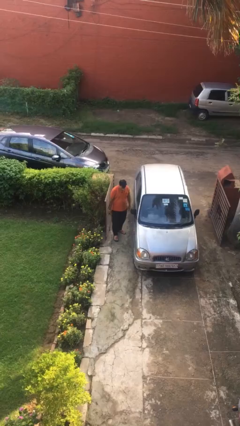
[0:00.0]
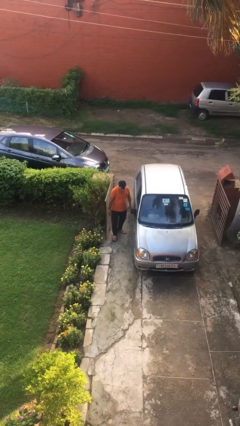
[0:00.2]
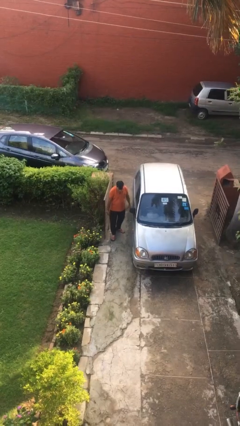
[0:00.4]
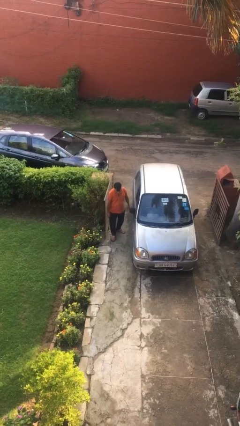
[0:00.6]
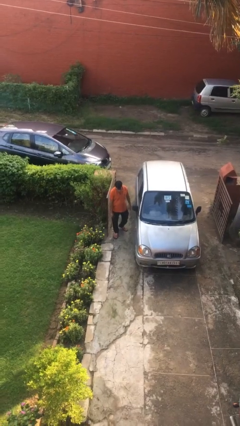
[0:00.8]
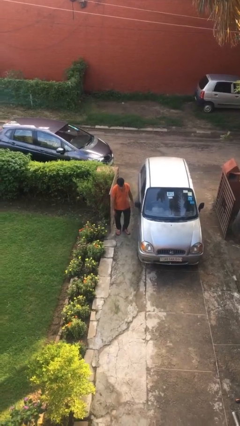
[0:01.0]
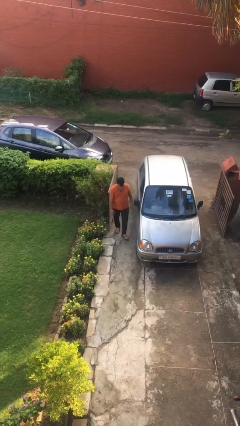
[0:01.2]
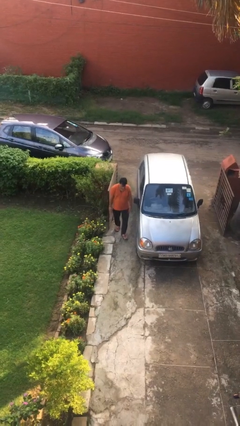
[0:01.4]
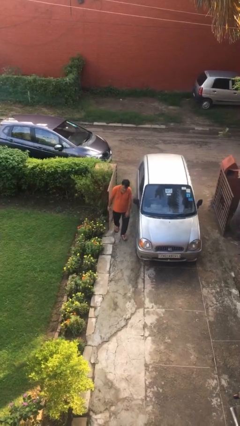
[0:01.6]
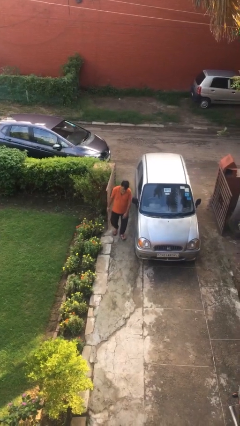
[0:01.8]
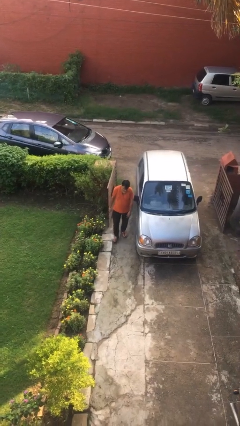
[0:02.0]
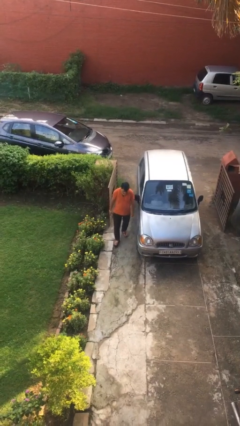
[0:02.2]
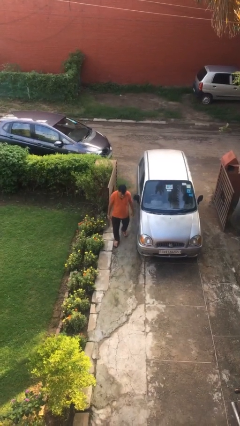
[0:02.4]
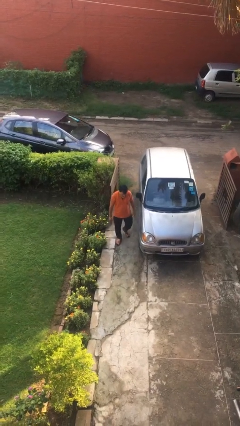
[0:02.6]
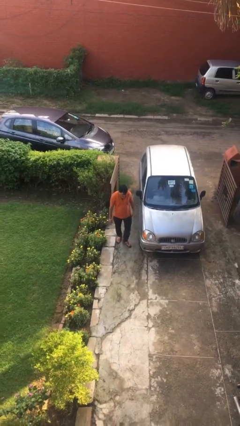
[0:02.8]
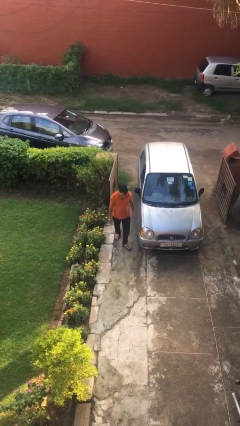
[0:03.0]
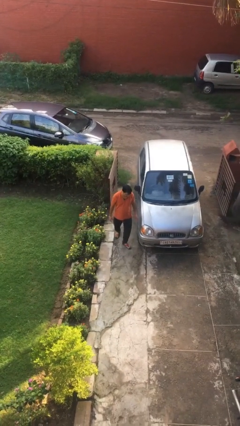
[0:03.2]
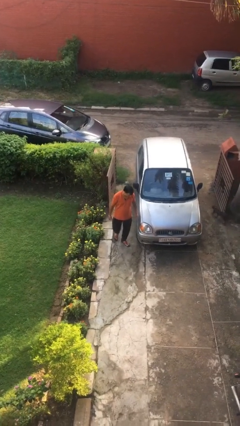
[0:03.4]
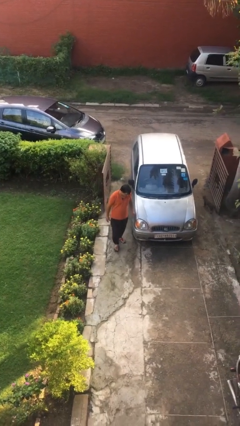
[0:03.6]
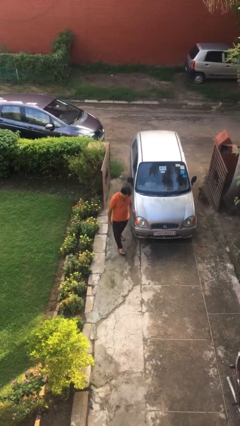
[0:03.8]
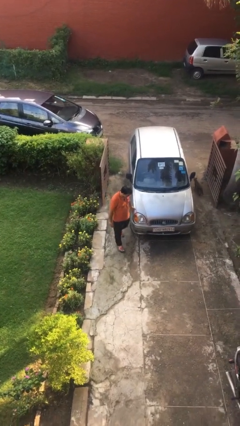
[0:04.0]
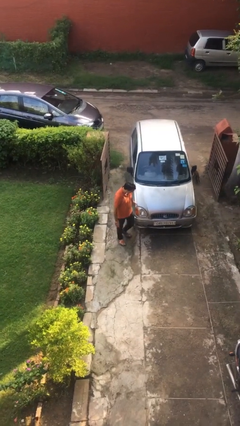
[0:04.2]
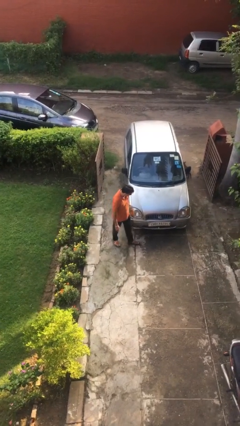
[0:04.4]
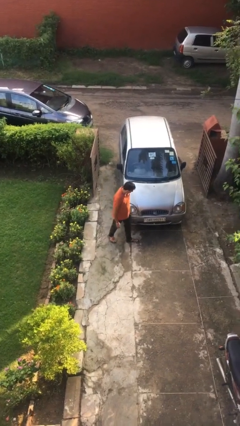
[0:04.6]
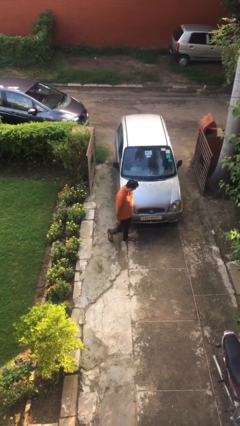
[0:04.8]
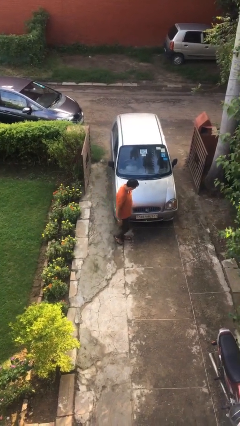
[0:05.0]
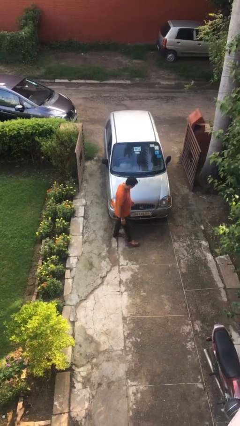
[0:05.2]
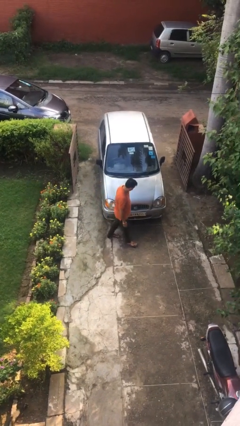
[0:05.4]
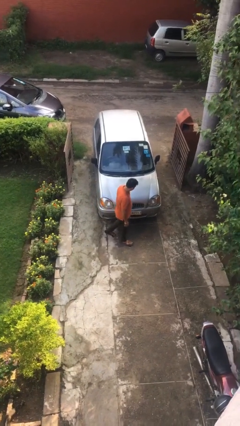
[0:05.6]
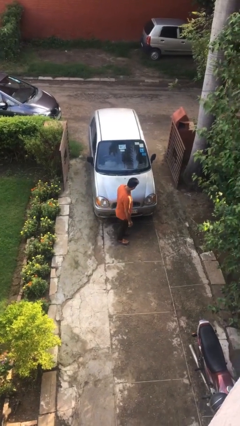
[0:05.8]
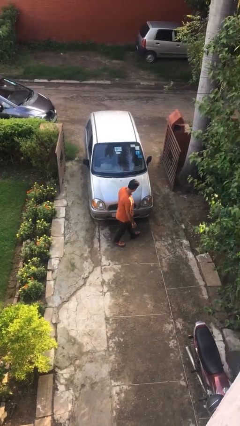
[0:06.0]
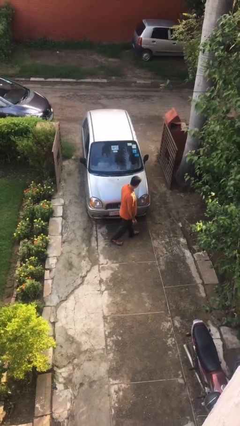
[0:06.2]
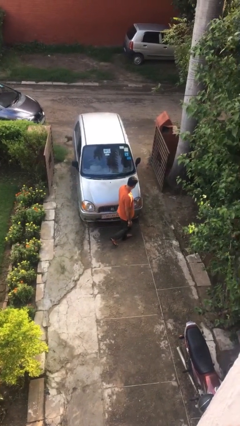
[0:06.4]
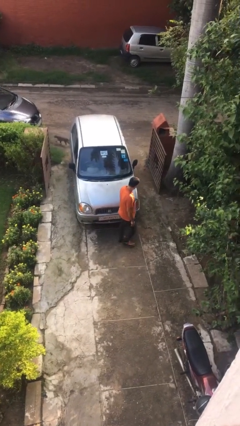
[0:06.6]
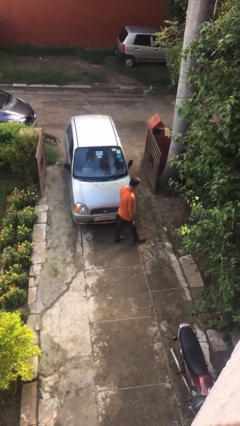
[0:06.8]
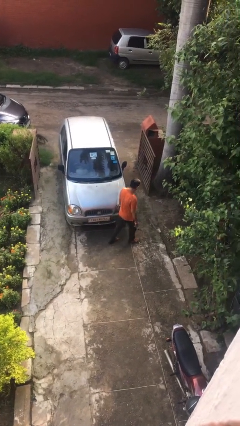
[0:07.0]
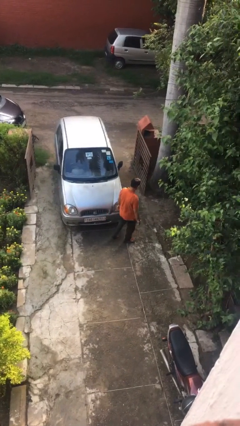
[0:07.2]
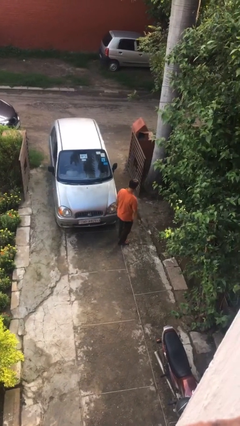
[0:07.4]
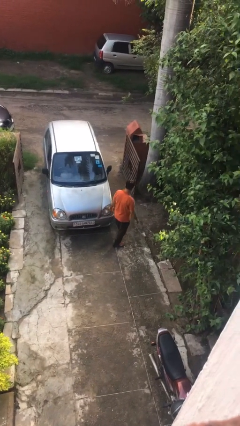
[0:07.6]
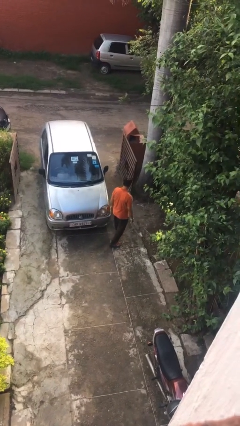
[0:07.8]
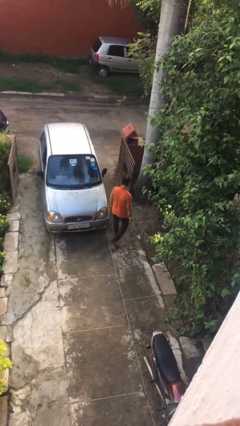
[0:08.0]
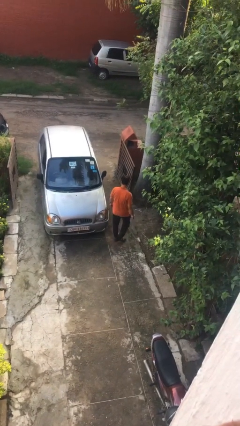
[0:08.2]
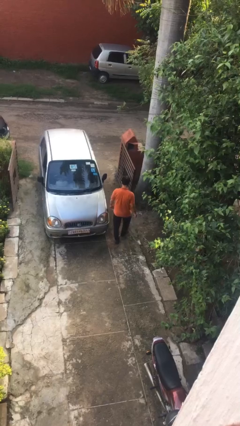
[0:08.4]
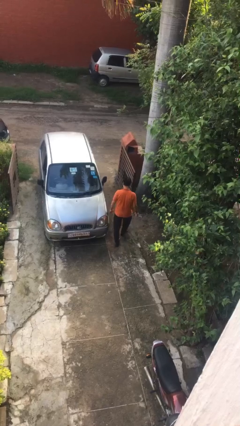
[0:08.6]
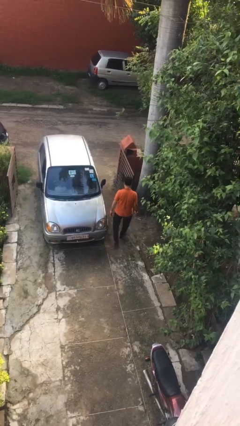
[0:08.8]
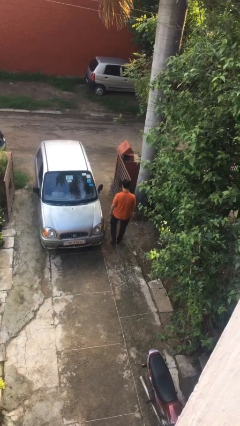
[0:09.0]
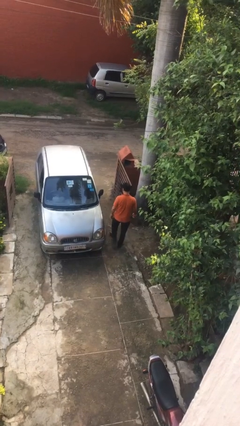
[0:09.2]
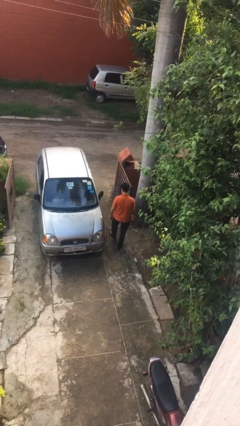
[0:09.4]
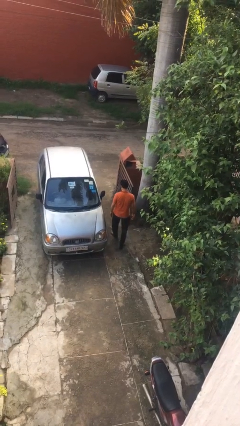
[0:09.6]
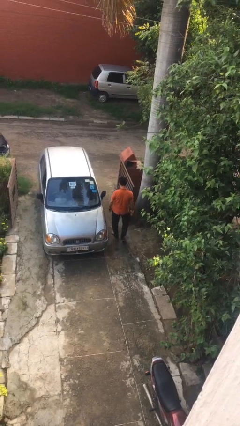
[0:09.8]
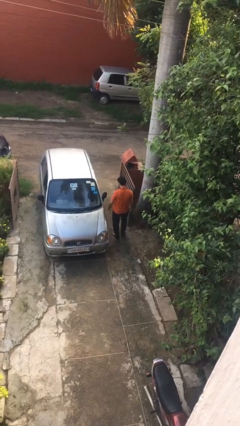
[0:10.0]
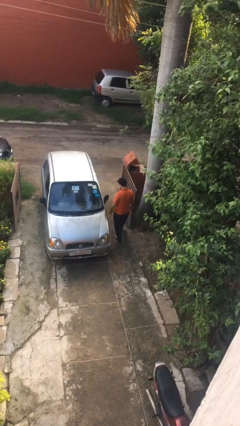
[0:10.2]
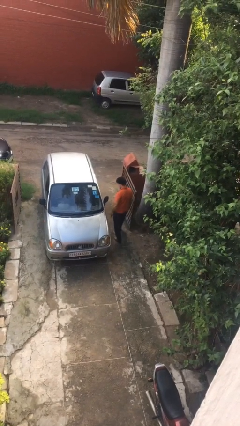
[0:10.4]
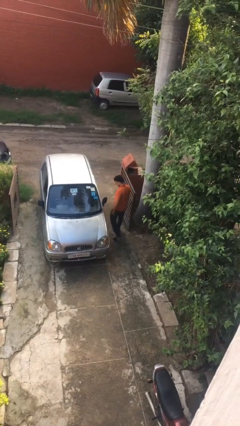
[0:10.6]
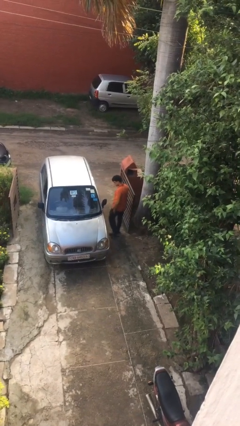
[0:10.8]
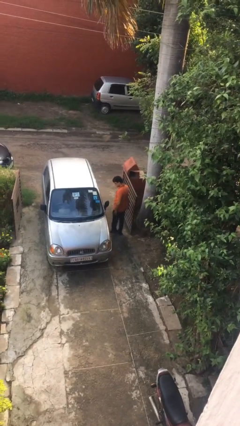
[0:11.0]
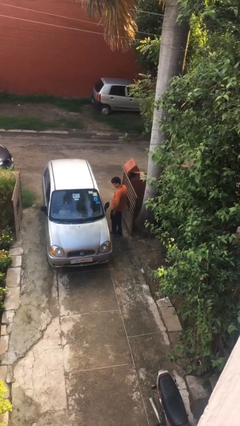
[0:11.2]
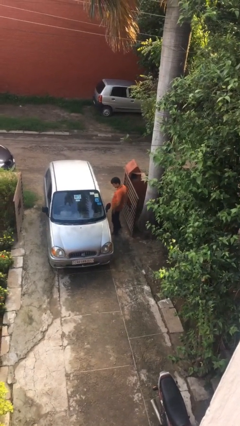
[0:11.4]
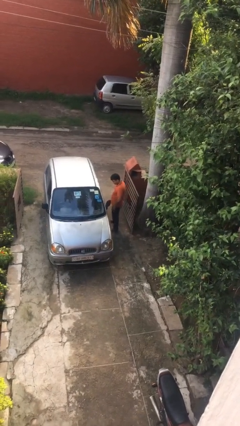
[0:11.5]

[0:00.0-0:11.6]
person walks around car

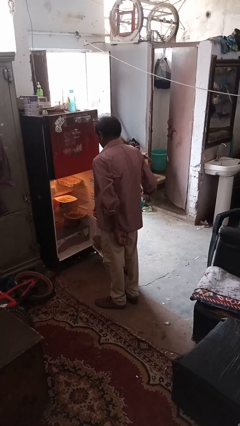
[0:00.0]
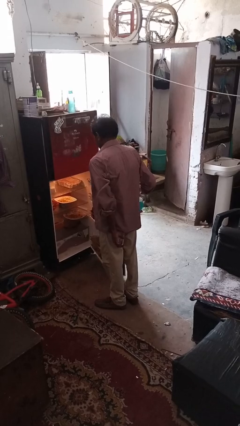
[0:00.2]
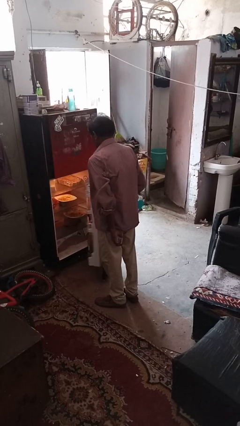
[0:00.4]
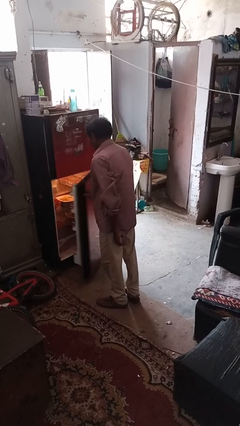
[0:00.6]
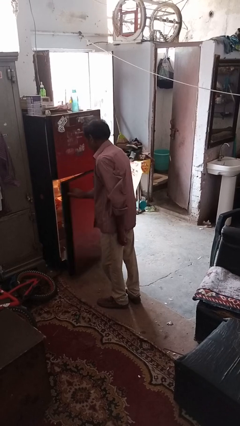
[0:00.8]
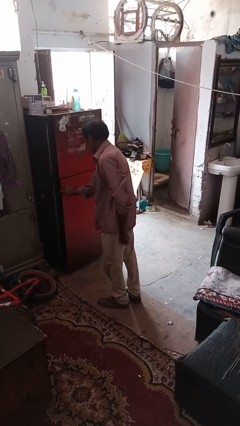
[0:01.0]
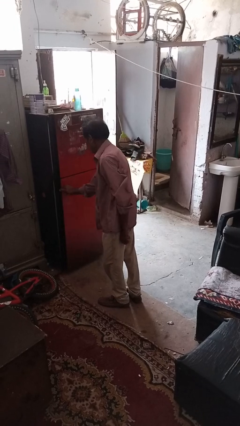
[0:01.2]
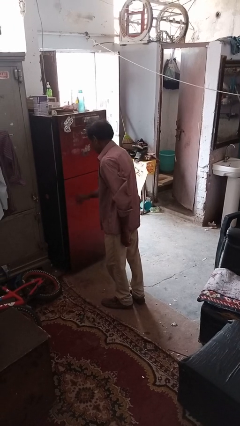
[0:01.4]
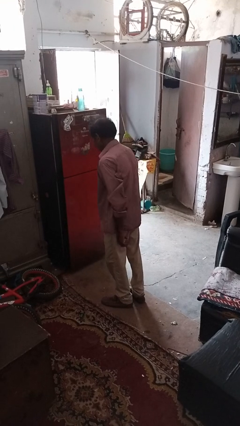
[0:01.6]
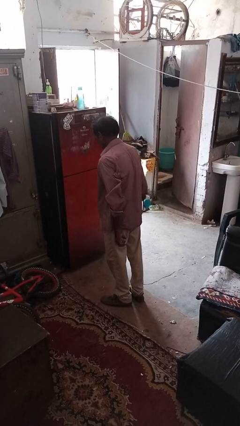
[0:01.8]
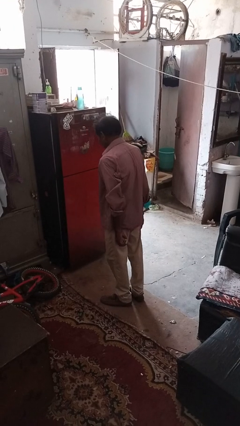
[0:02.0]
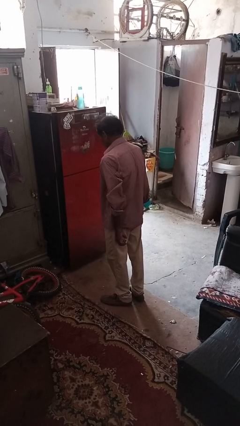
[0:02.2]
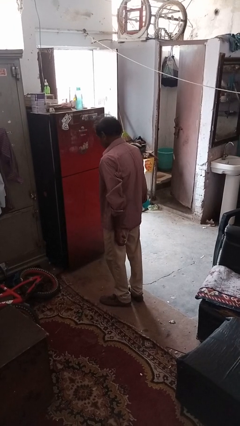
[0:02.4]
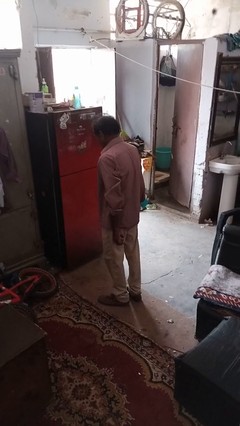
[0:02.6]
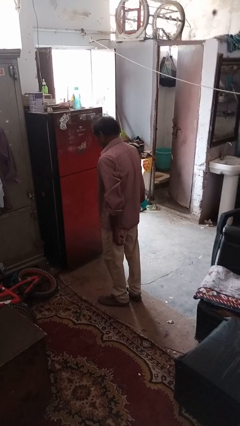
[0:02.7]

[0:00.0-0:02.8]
person closes refrigerator

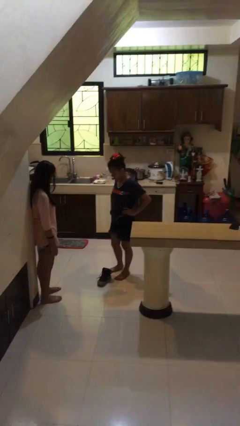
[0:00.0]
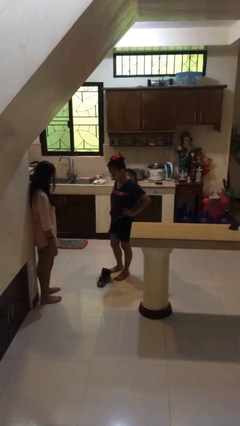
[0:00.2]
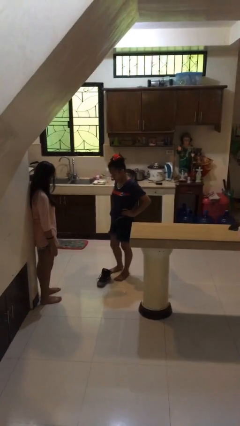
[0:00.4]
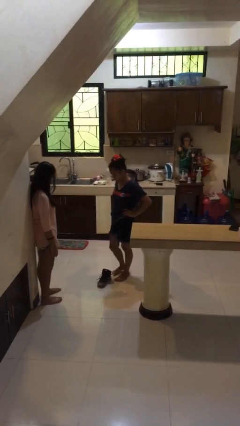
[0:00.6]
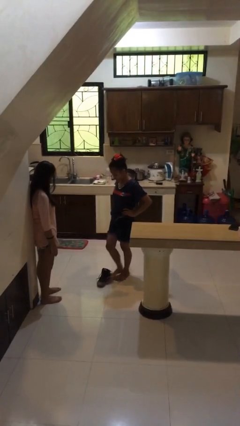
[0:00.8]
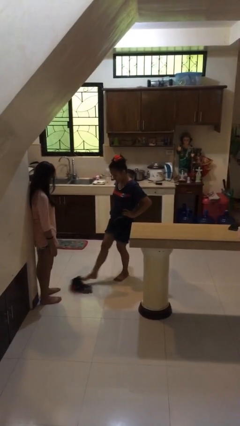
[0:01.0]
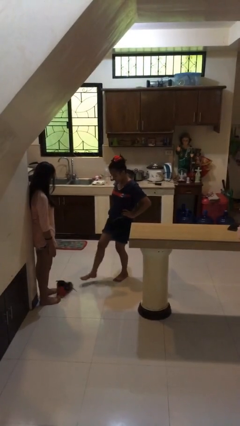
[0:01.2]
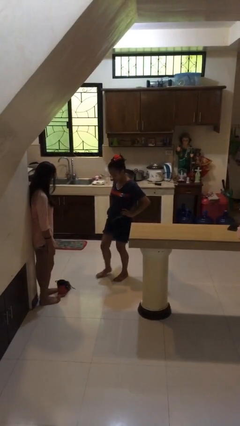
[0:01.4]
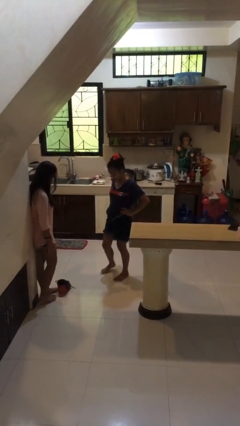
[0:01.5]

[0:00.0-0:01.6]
person kicks object to person

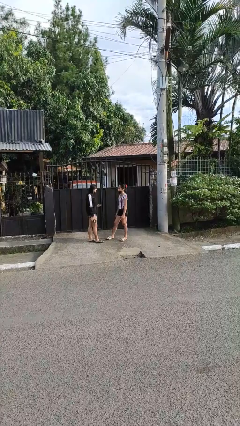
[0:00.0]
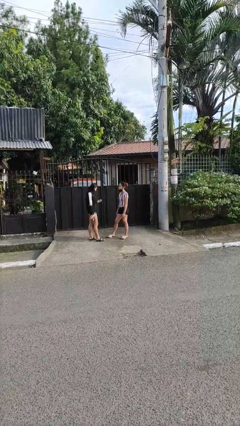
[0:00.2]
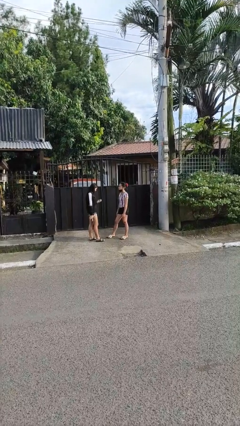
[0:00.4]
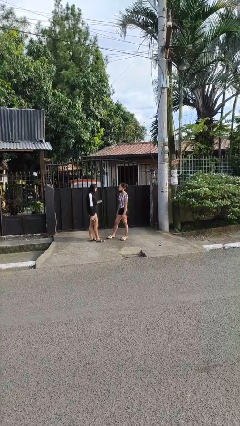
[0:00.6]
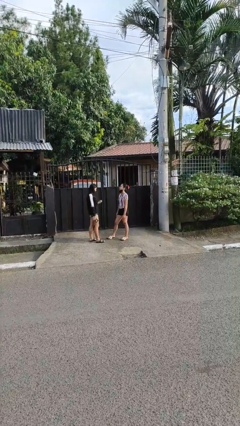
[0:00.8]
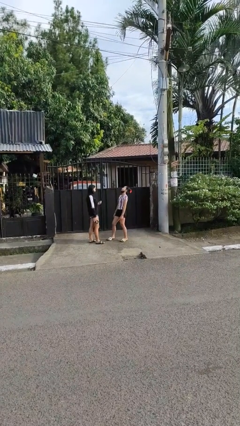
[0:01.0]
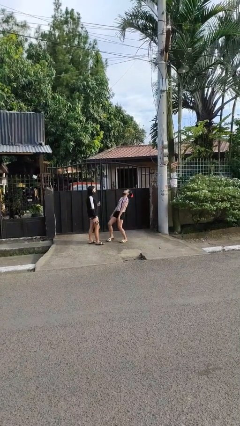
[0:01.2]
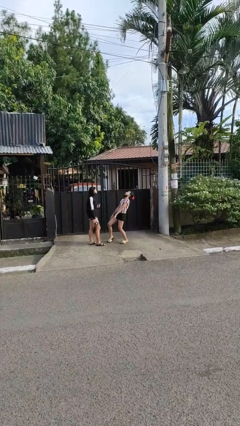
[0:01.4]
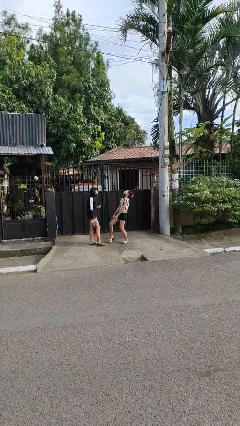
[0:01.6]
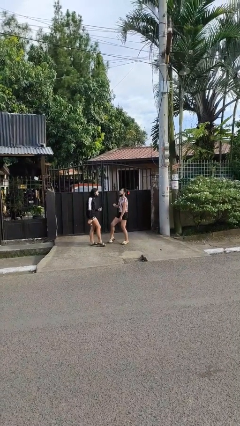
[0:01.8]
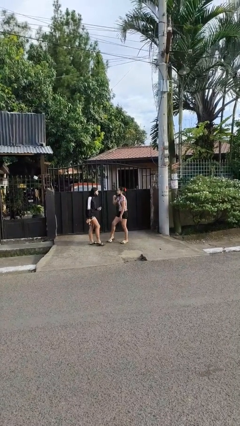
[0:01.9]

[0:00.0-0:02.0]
person laughs with person

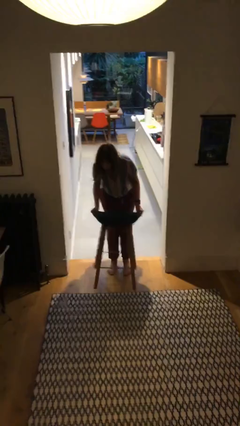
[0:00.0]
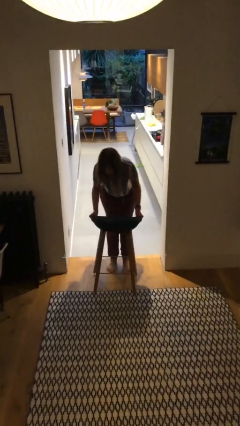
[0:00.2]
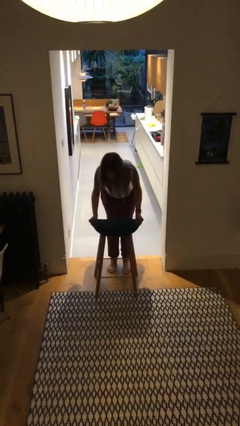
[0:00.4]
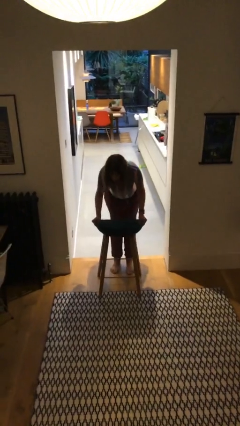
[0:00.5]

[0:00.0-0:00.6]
person puts down object on floor
